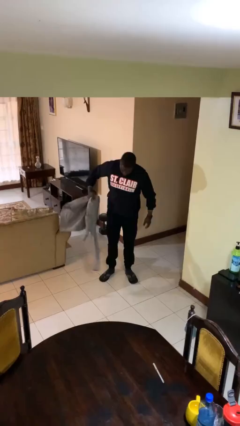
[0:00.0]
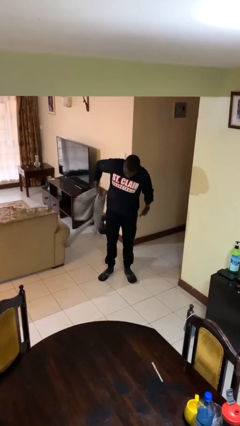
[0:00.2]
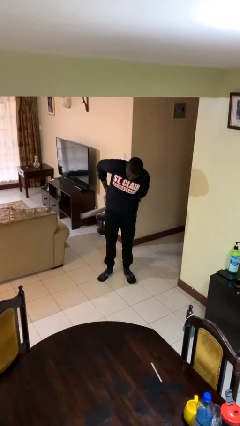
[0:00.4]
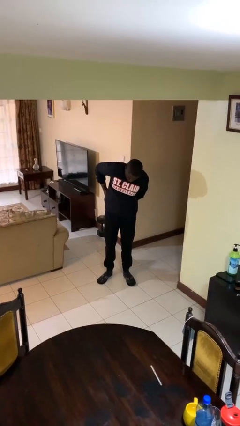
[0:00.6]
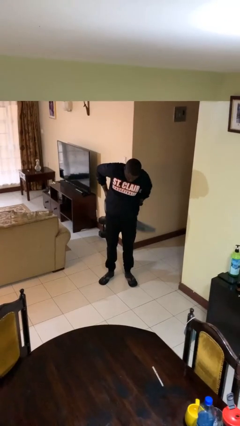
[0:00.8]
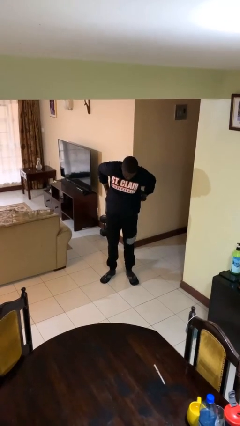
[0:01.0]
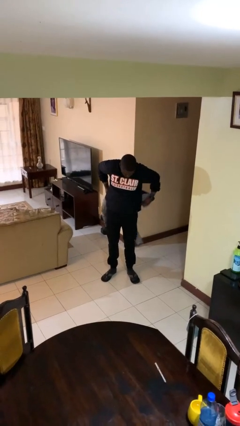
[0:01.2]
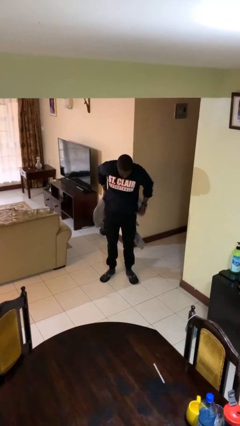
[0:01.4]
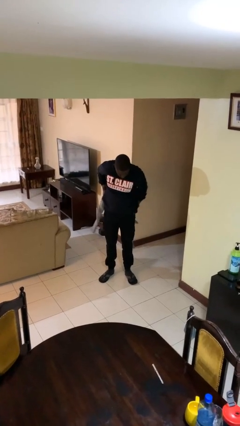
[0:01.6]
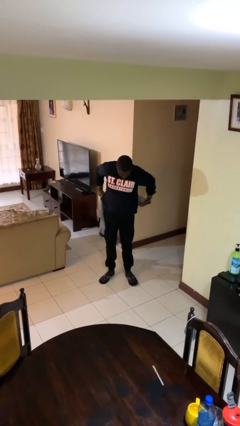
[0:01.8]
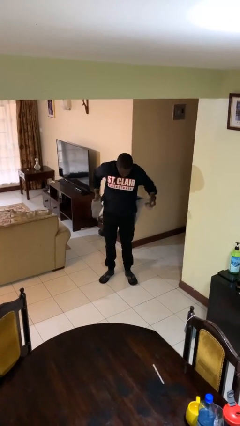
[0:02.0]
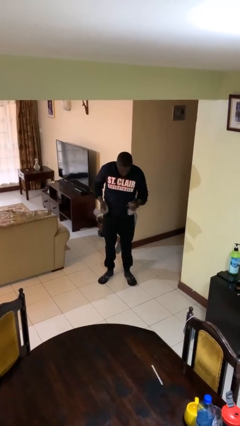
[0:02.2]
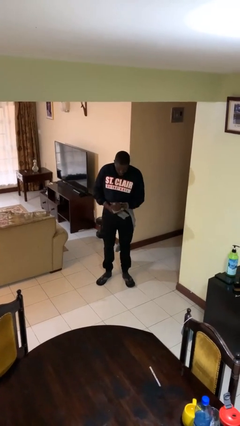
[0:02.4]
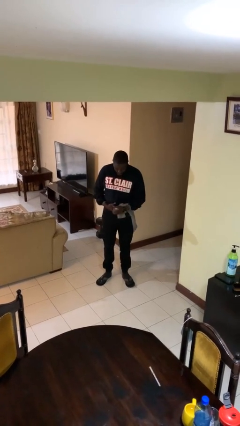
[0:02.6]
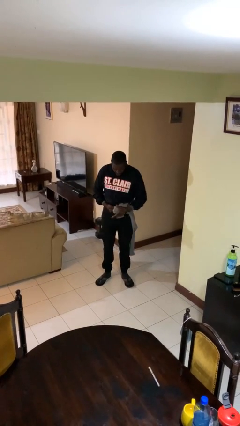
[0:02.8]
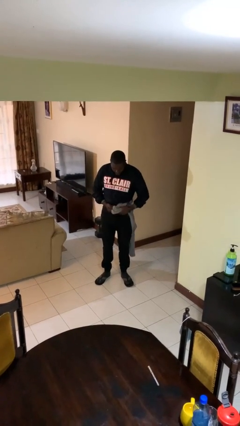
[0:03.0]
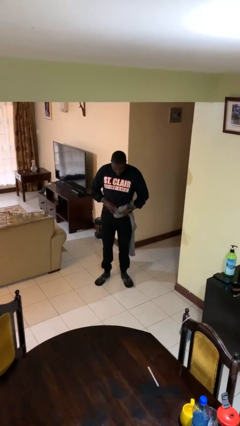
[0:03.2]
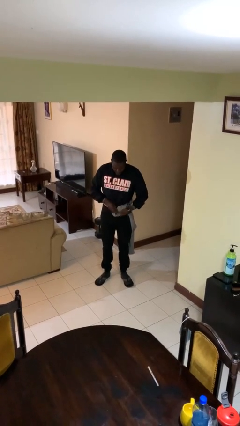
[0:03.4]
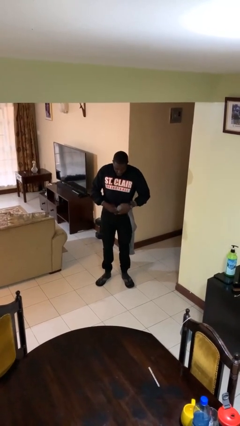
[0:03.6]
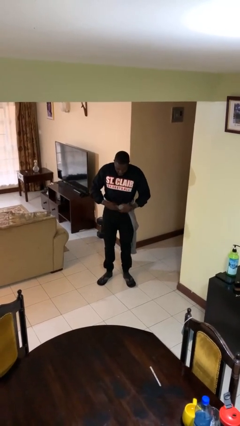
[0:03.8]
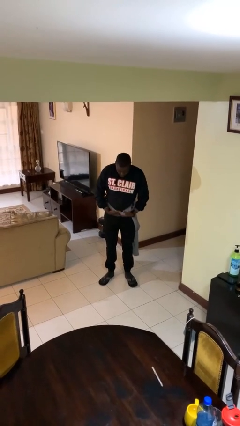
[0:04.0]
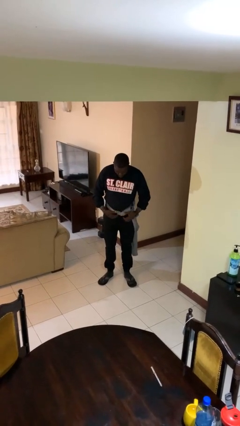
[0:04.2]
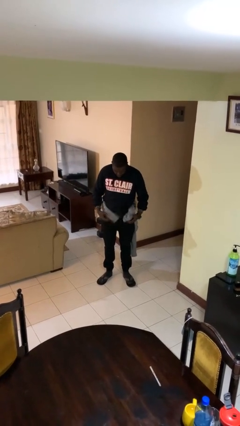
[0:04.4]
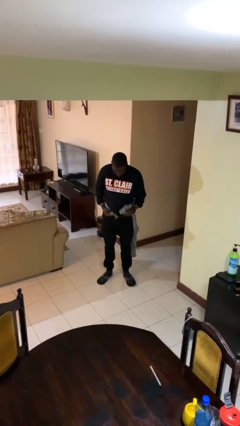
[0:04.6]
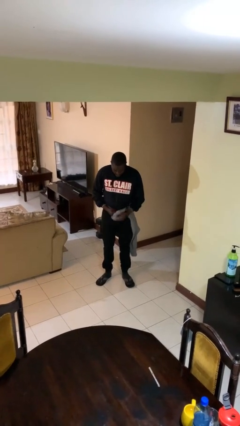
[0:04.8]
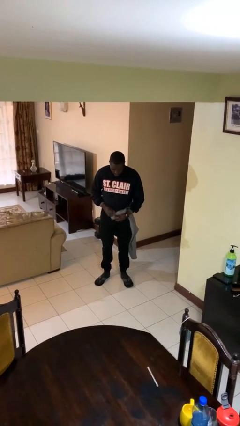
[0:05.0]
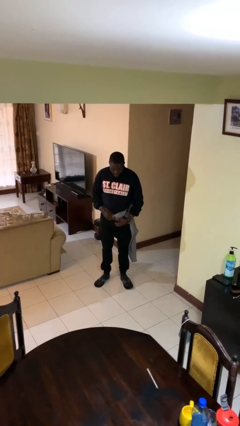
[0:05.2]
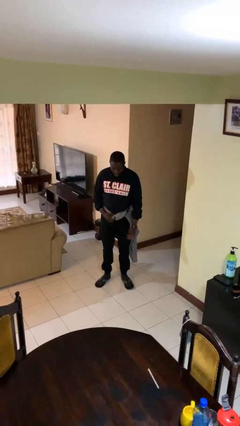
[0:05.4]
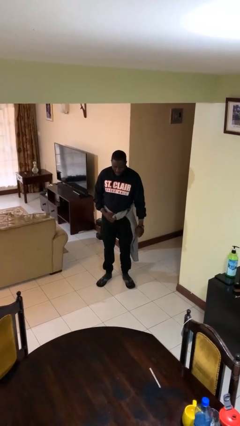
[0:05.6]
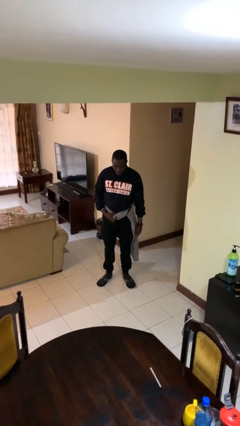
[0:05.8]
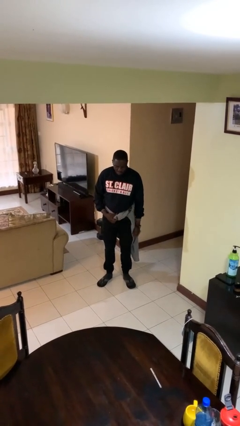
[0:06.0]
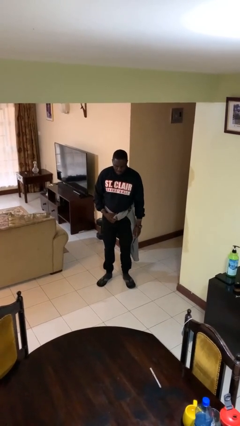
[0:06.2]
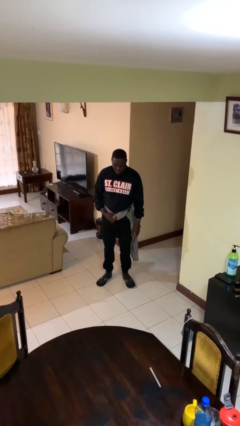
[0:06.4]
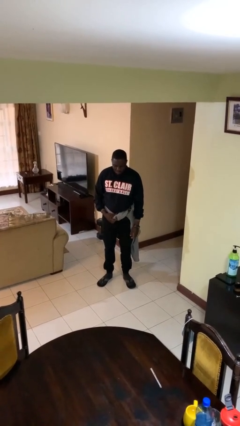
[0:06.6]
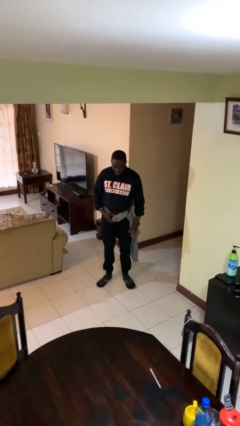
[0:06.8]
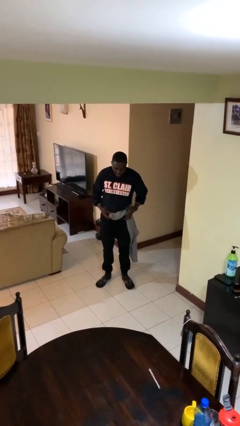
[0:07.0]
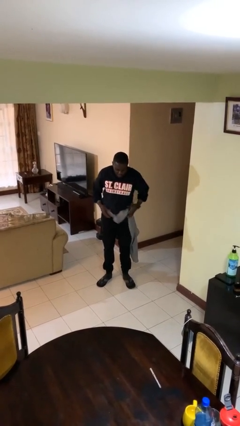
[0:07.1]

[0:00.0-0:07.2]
person ties jacket around waist

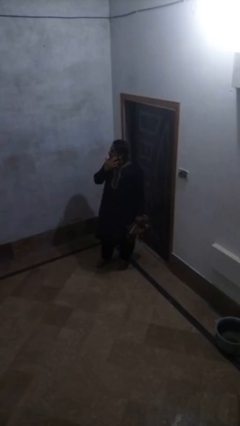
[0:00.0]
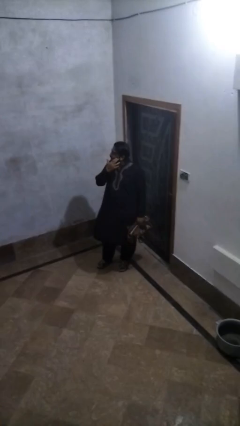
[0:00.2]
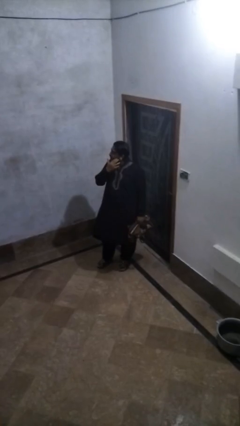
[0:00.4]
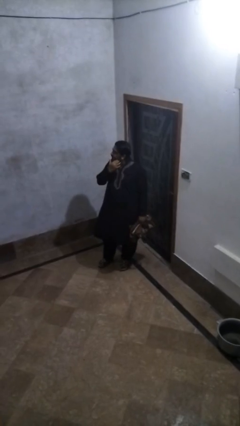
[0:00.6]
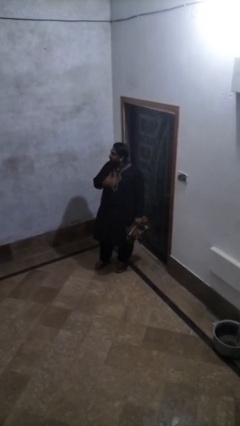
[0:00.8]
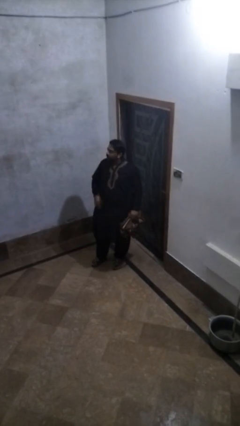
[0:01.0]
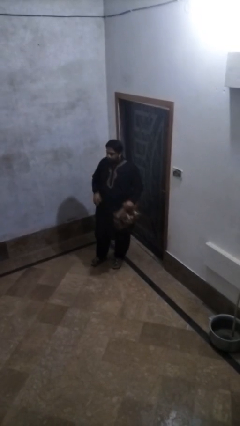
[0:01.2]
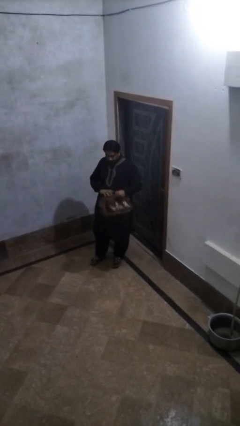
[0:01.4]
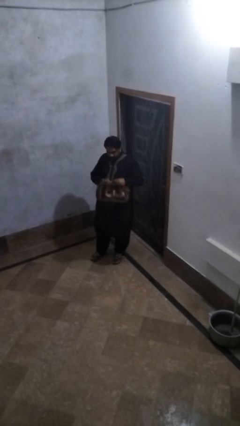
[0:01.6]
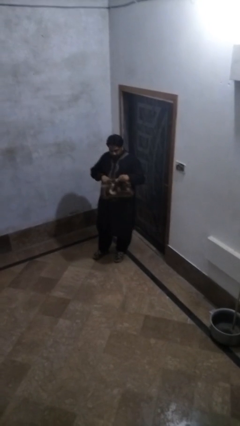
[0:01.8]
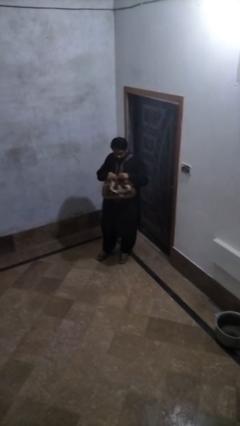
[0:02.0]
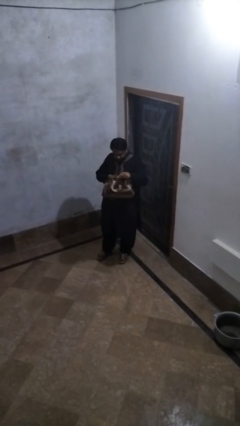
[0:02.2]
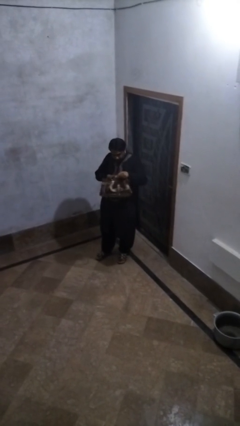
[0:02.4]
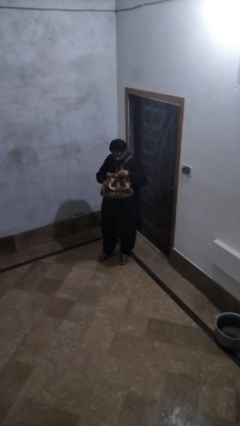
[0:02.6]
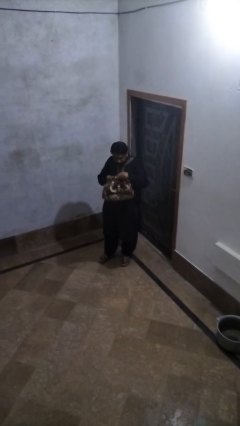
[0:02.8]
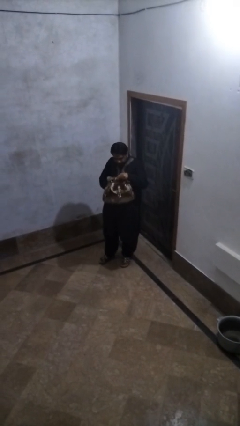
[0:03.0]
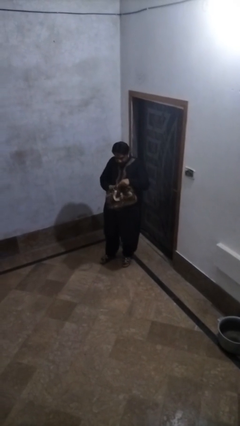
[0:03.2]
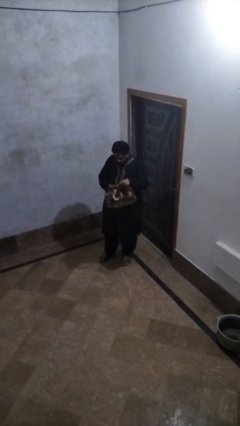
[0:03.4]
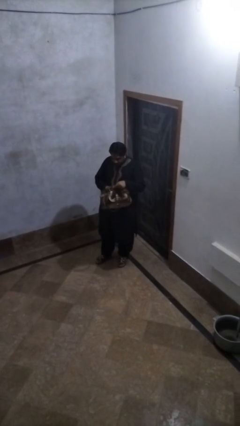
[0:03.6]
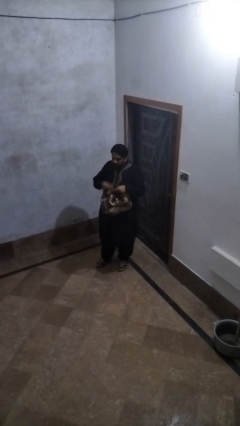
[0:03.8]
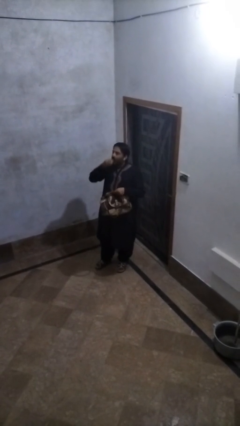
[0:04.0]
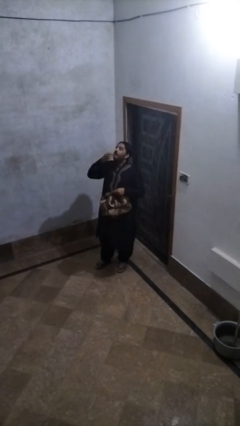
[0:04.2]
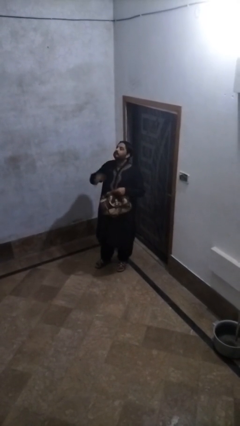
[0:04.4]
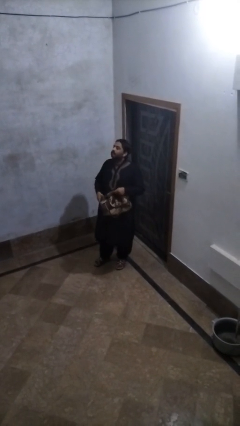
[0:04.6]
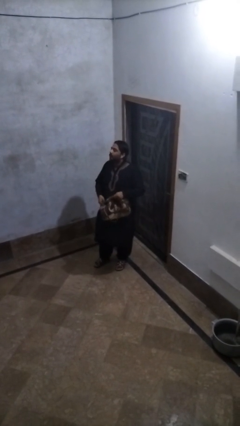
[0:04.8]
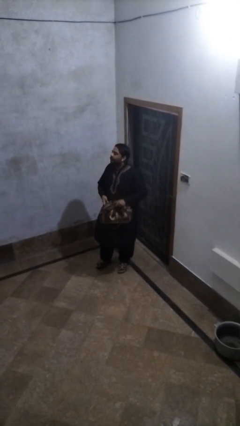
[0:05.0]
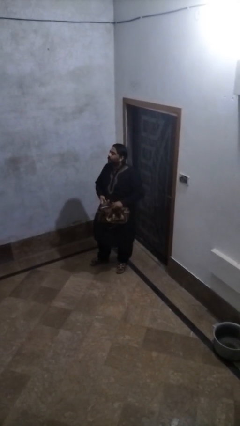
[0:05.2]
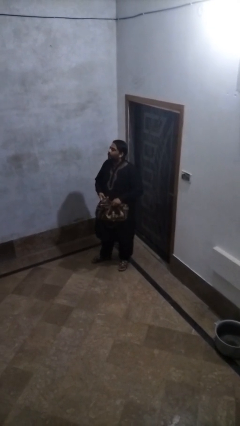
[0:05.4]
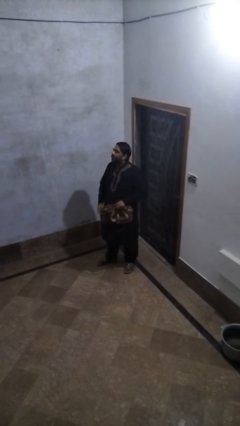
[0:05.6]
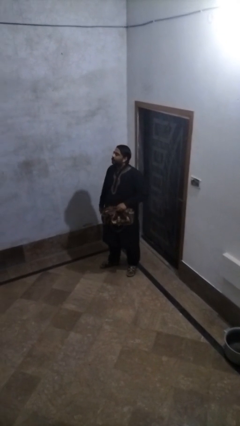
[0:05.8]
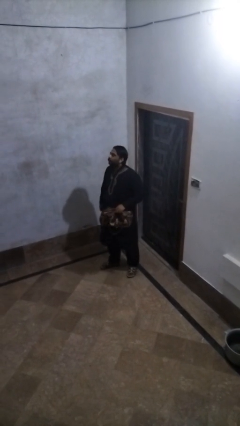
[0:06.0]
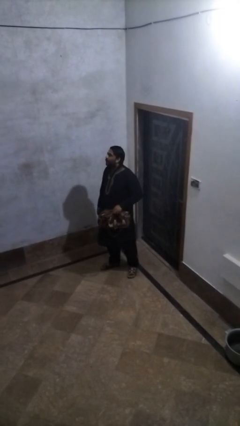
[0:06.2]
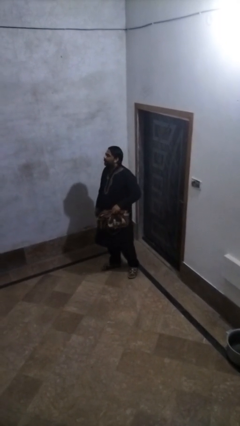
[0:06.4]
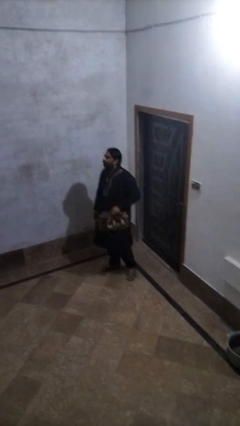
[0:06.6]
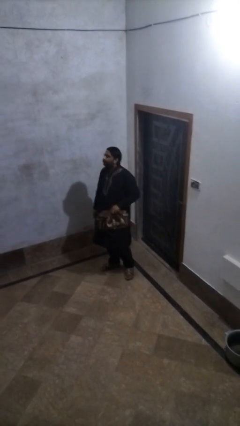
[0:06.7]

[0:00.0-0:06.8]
person eats snack from bag

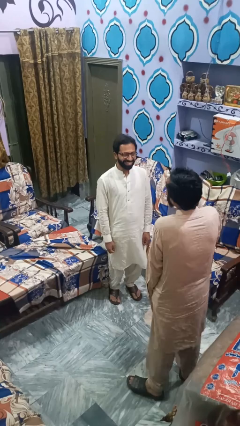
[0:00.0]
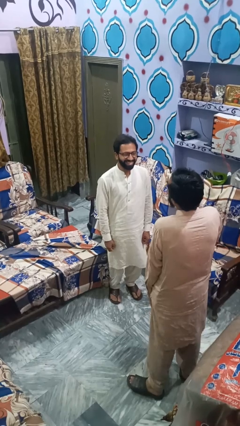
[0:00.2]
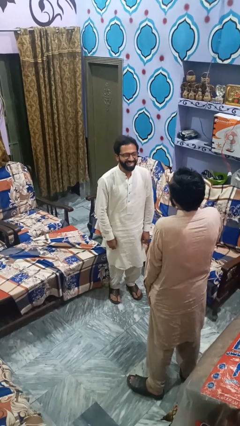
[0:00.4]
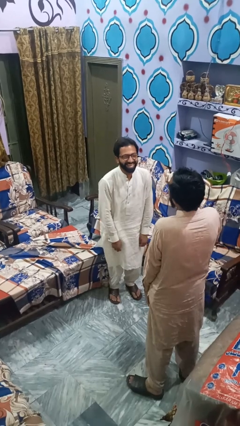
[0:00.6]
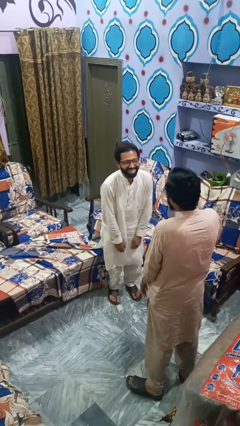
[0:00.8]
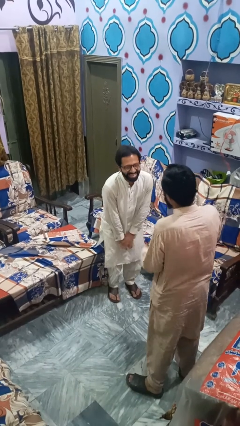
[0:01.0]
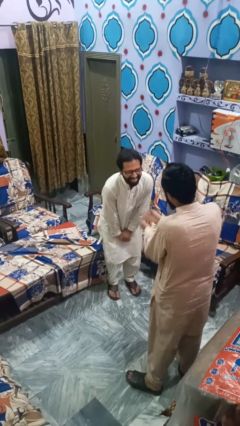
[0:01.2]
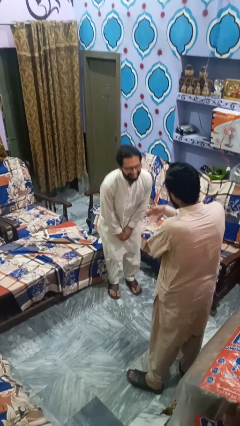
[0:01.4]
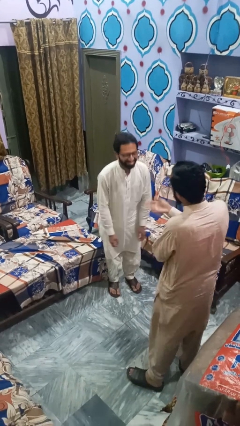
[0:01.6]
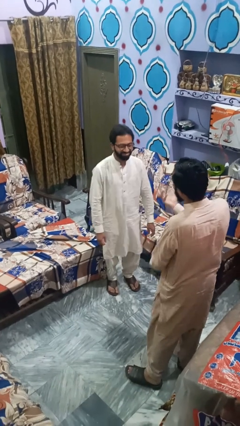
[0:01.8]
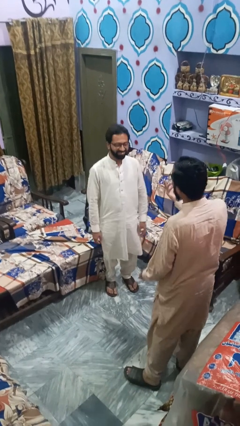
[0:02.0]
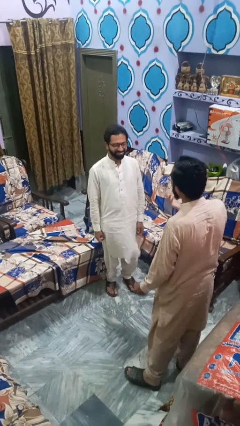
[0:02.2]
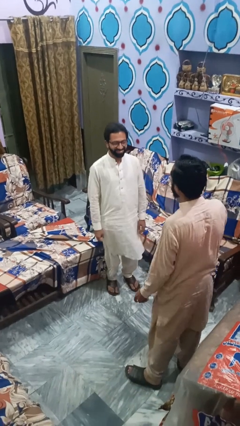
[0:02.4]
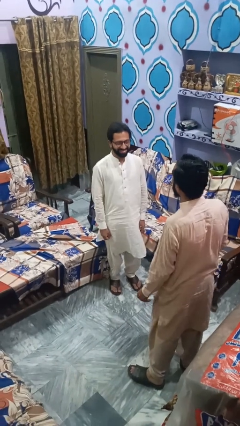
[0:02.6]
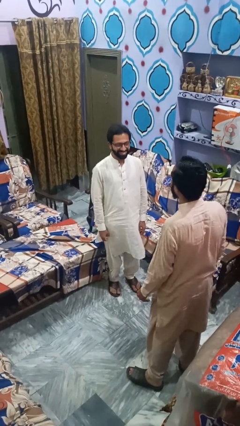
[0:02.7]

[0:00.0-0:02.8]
person laughs with person

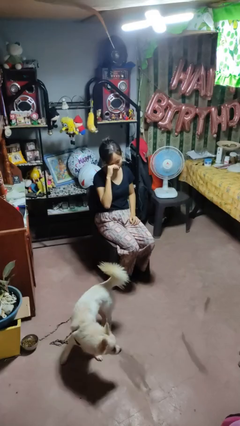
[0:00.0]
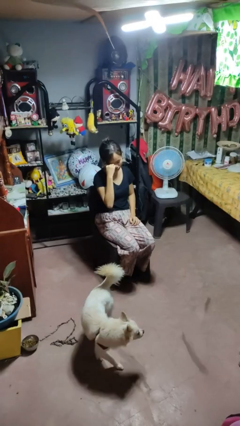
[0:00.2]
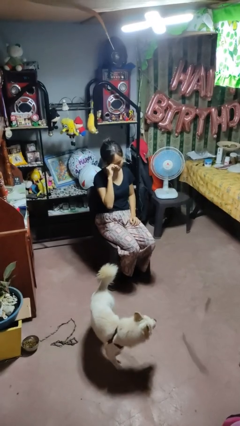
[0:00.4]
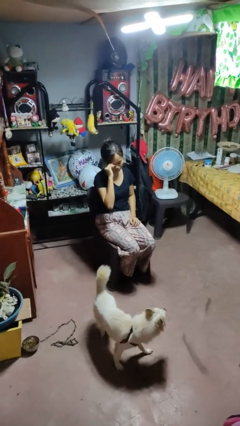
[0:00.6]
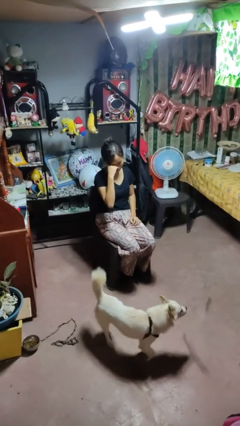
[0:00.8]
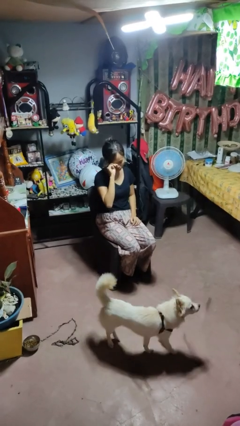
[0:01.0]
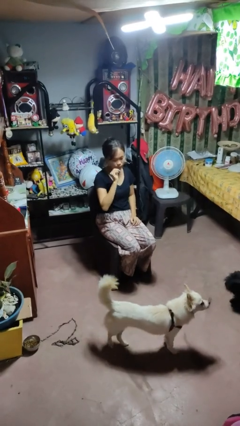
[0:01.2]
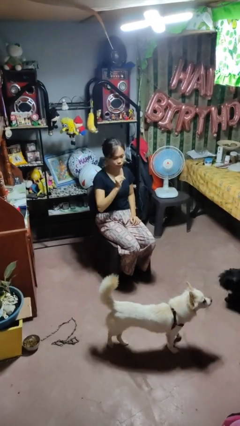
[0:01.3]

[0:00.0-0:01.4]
person rubs eyes
